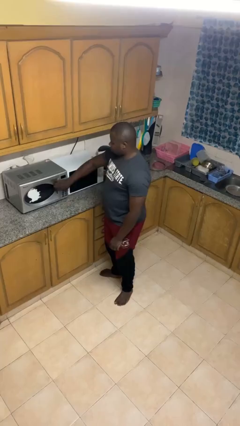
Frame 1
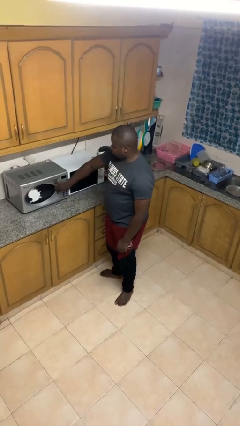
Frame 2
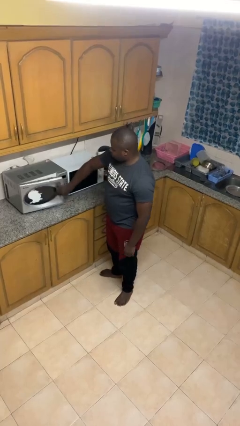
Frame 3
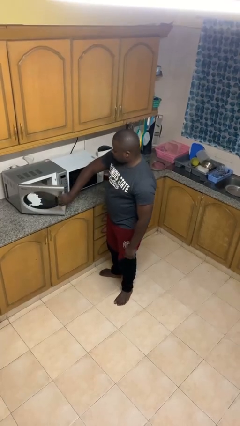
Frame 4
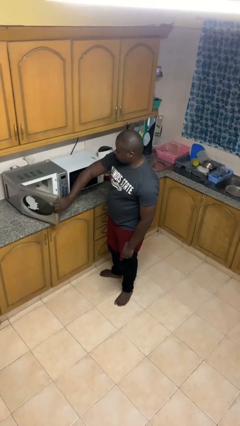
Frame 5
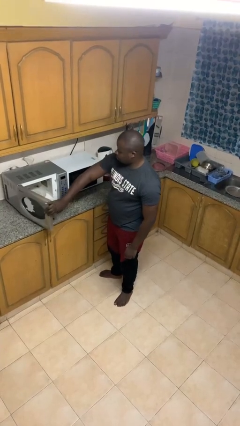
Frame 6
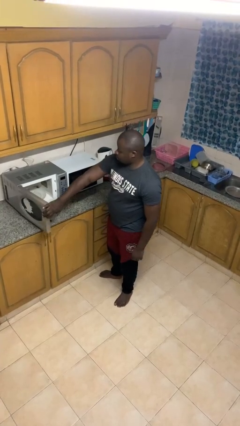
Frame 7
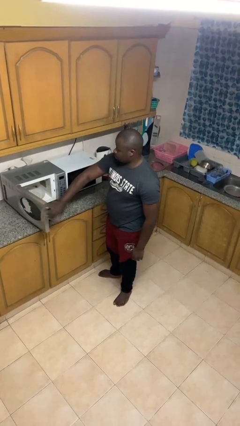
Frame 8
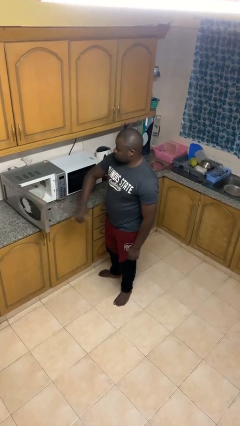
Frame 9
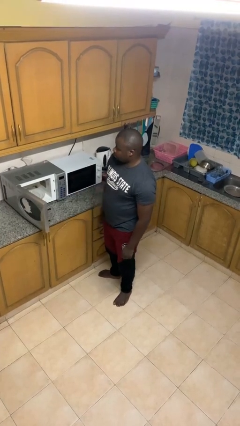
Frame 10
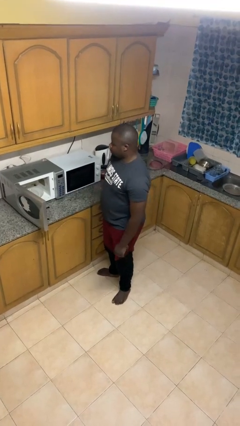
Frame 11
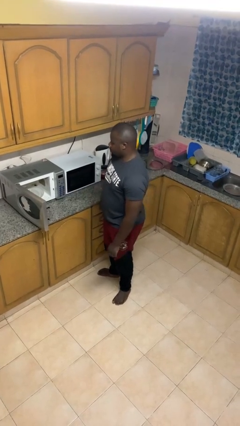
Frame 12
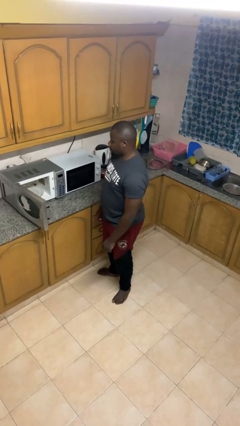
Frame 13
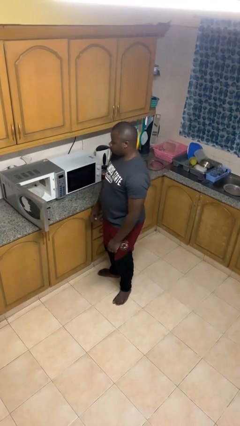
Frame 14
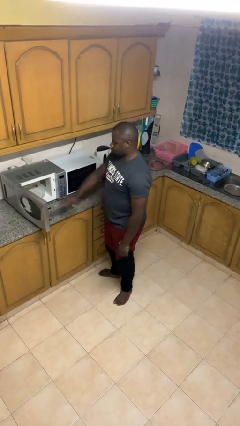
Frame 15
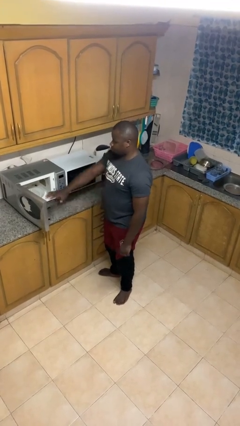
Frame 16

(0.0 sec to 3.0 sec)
person opens microwave

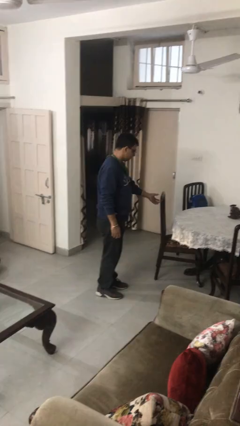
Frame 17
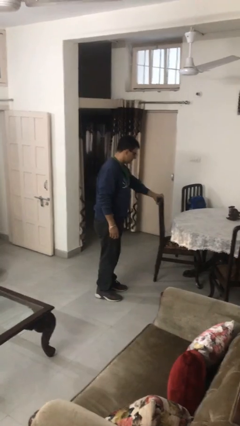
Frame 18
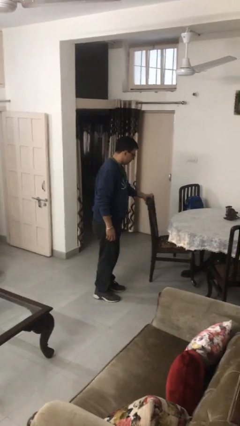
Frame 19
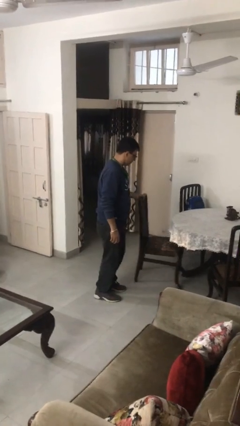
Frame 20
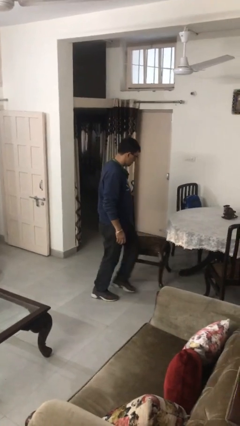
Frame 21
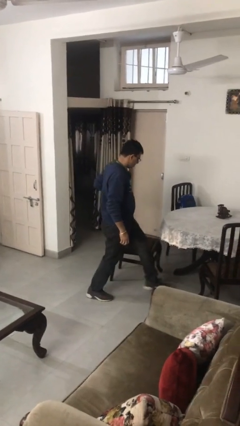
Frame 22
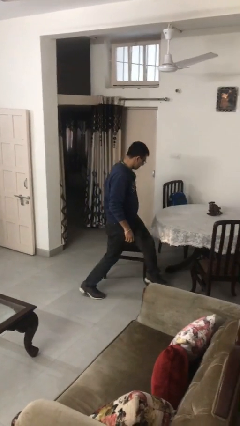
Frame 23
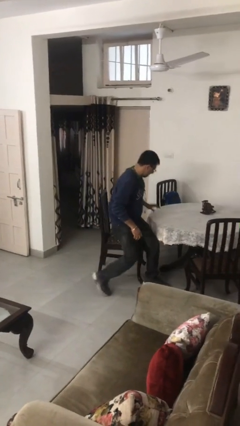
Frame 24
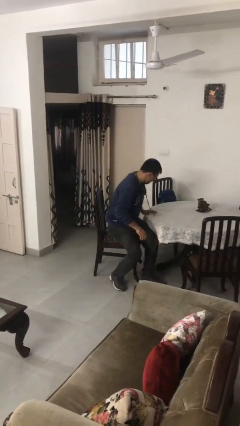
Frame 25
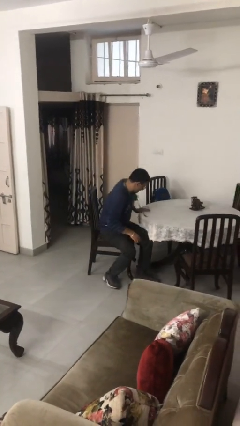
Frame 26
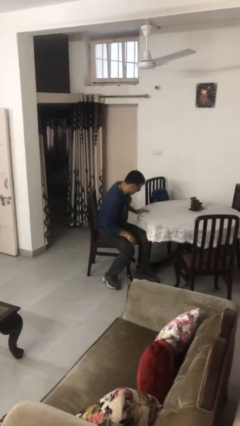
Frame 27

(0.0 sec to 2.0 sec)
person sits down

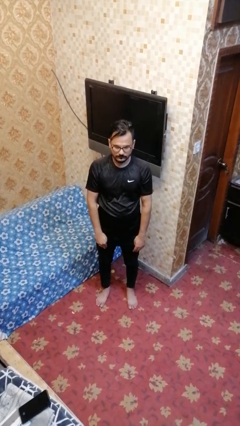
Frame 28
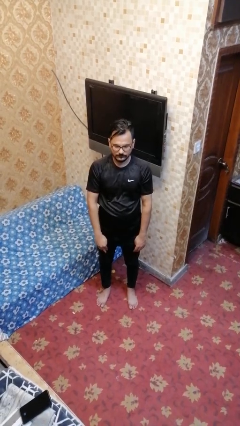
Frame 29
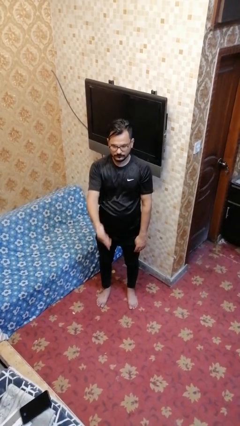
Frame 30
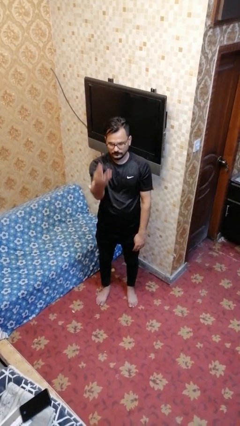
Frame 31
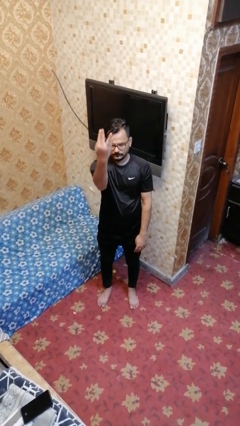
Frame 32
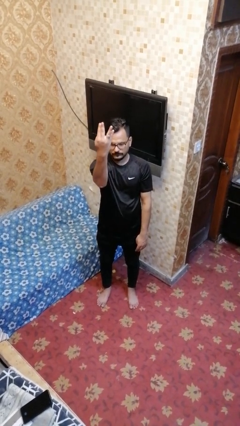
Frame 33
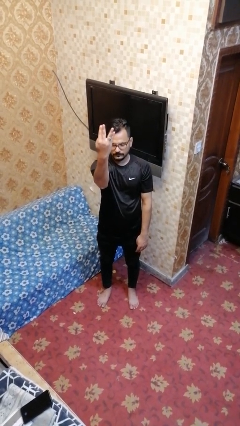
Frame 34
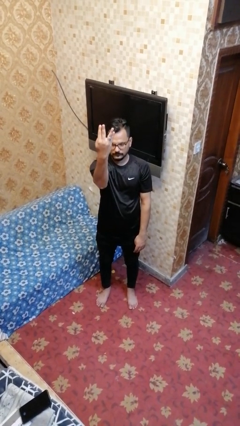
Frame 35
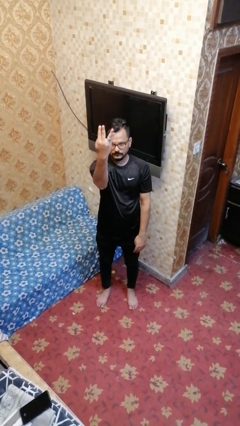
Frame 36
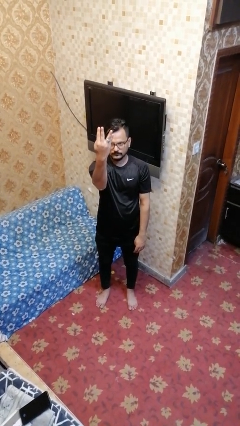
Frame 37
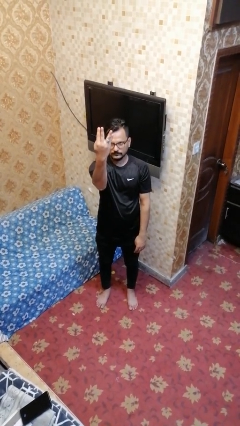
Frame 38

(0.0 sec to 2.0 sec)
person gestures number four

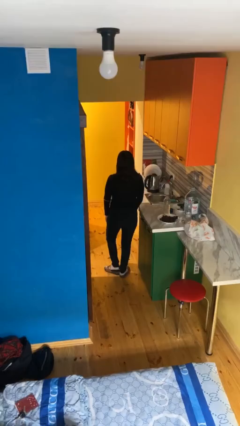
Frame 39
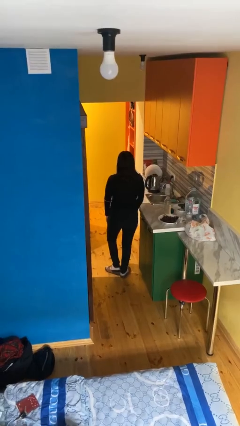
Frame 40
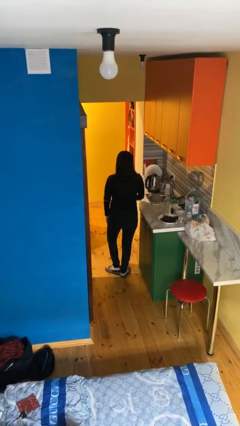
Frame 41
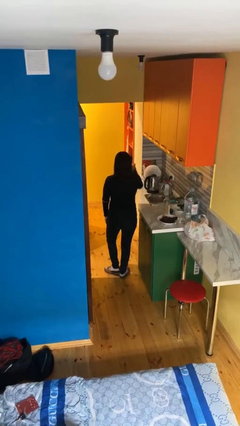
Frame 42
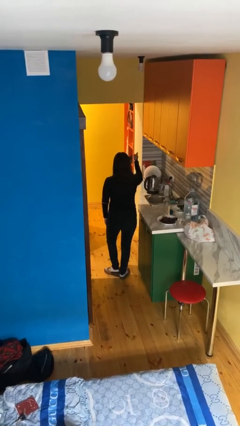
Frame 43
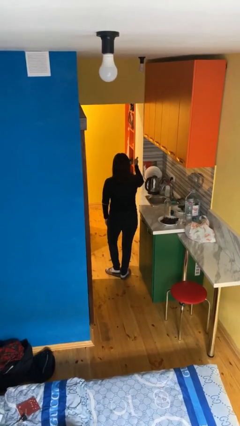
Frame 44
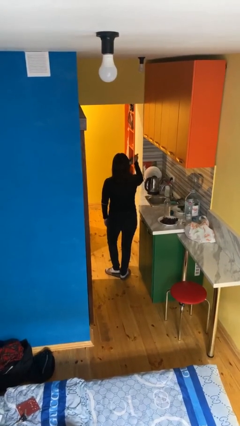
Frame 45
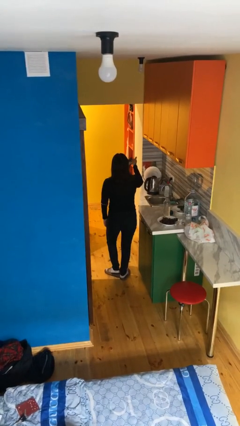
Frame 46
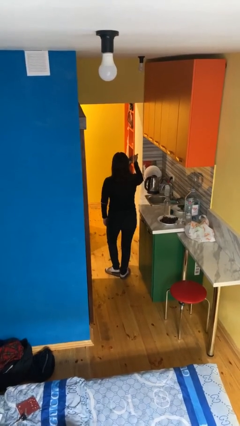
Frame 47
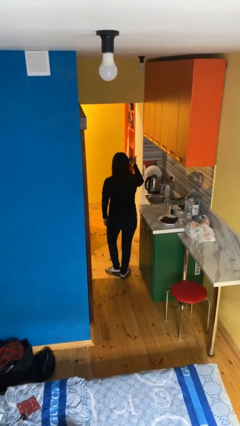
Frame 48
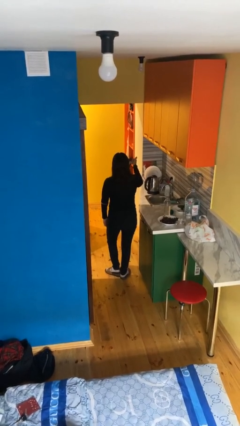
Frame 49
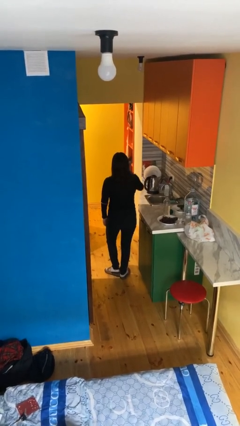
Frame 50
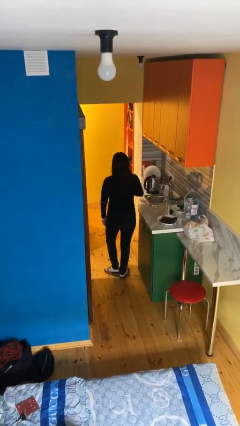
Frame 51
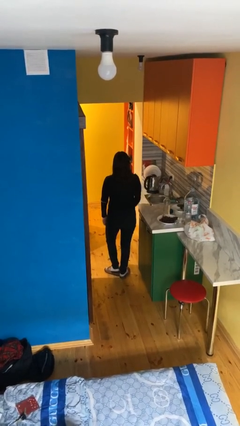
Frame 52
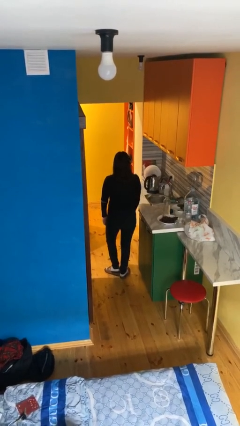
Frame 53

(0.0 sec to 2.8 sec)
person gestures thumbs up

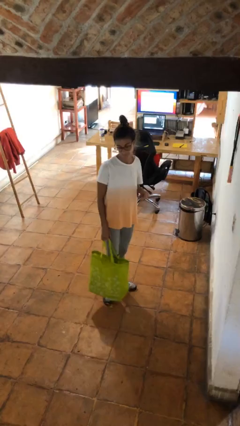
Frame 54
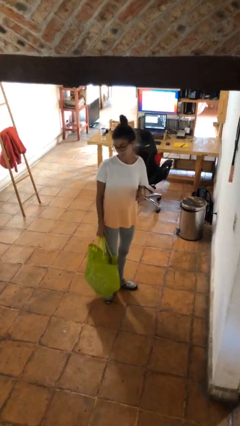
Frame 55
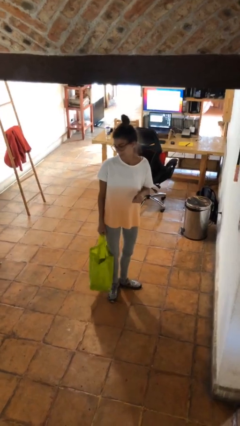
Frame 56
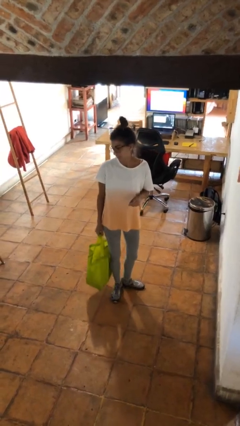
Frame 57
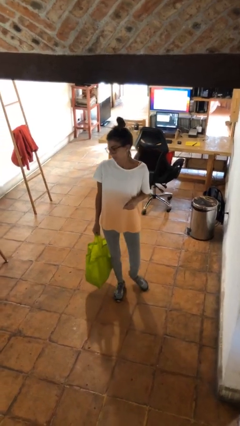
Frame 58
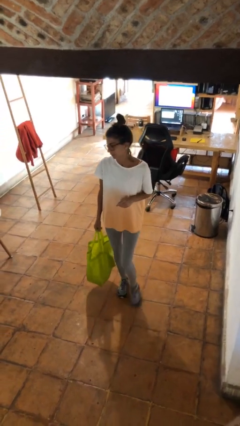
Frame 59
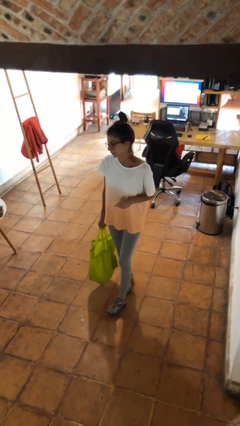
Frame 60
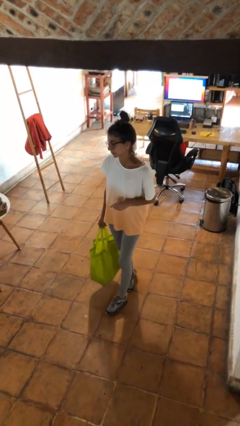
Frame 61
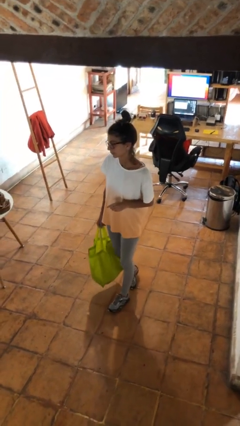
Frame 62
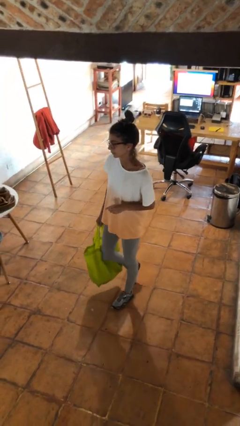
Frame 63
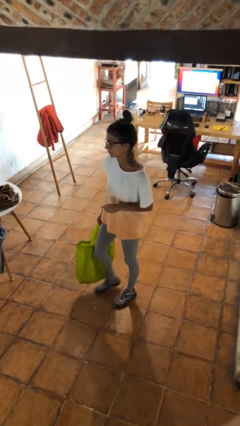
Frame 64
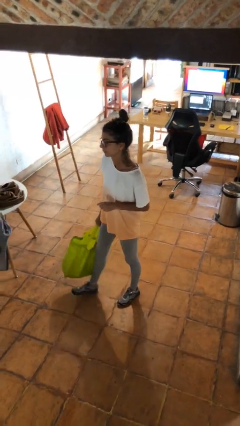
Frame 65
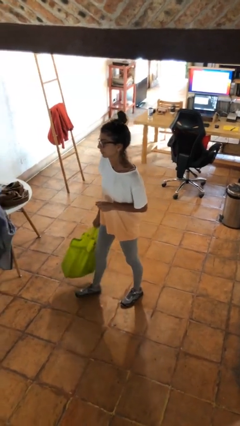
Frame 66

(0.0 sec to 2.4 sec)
person carries groceries

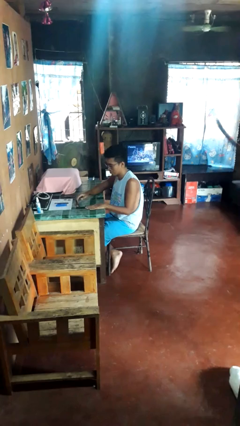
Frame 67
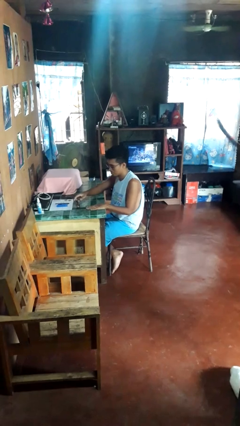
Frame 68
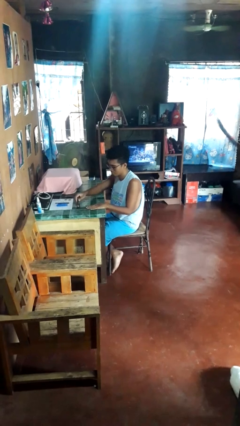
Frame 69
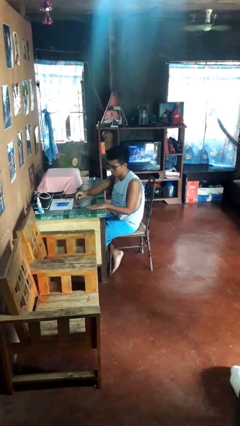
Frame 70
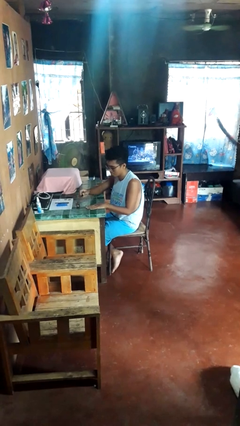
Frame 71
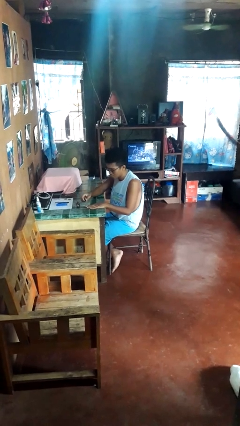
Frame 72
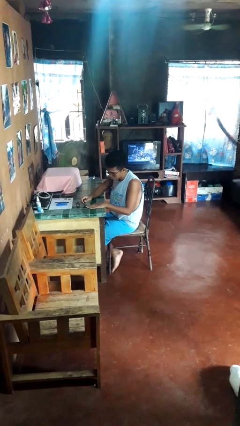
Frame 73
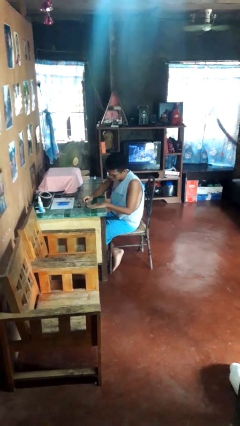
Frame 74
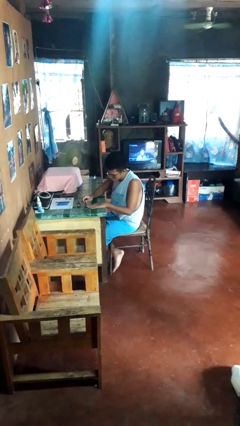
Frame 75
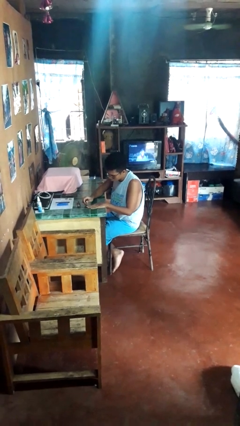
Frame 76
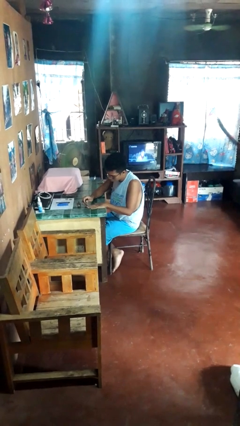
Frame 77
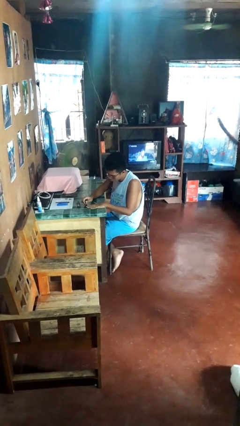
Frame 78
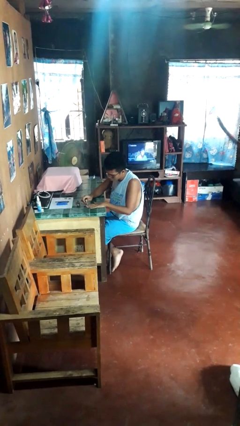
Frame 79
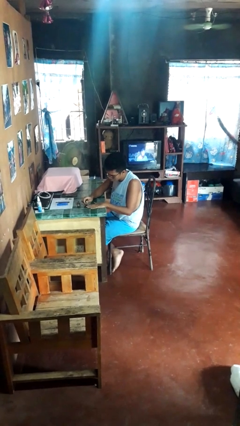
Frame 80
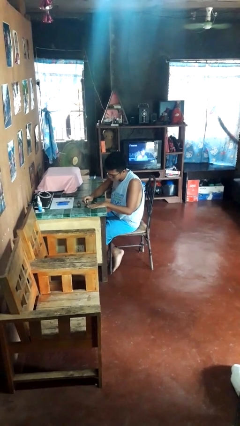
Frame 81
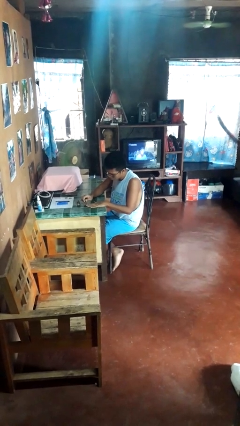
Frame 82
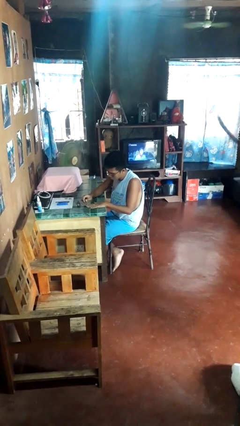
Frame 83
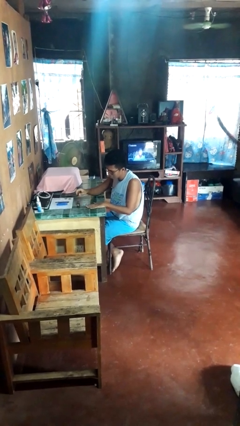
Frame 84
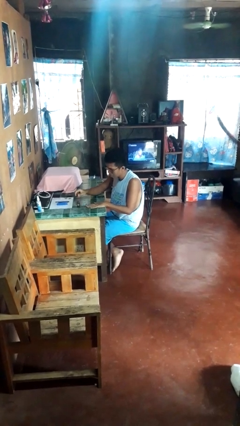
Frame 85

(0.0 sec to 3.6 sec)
person paints fingernails

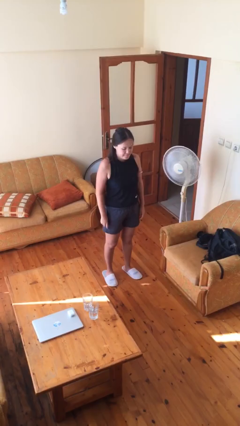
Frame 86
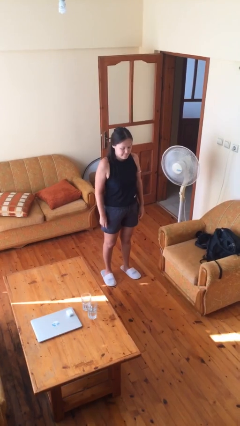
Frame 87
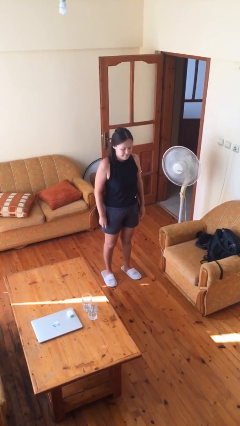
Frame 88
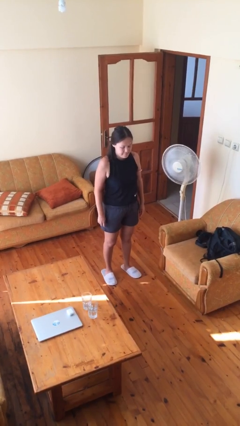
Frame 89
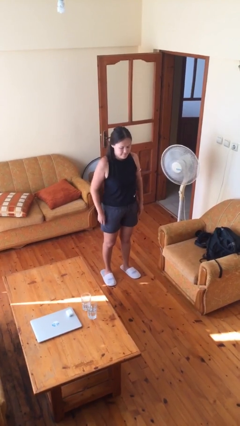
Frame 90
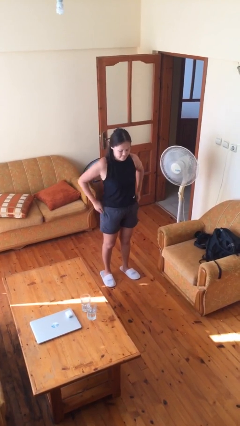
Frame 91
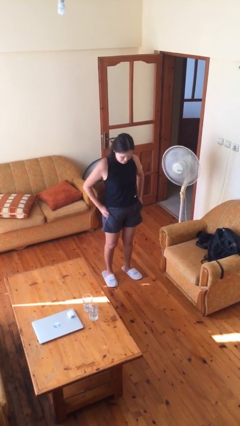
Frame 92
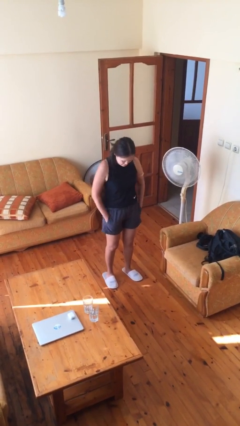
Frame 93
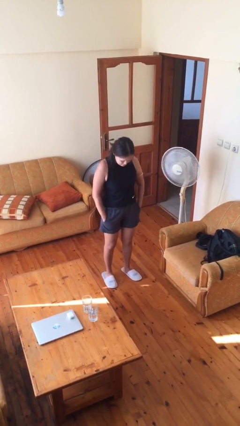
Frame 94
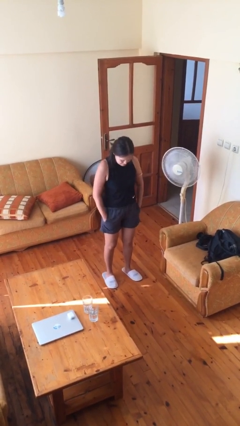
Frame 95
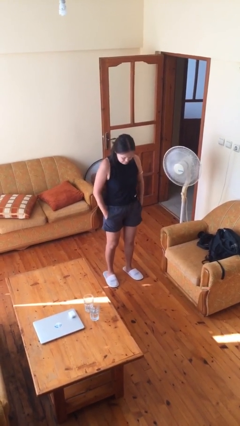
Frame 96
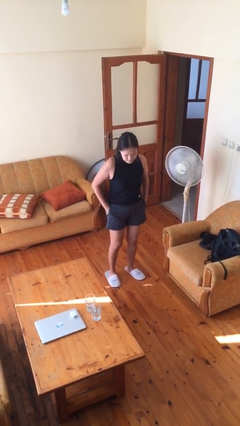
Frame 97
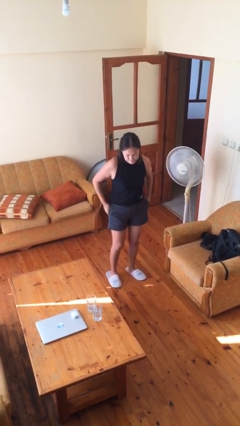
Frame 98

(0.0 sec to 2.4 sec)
person puts hands in back pockets
